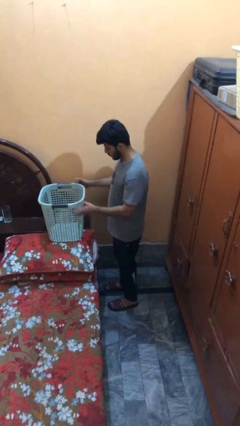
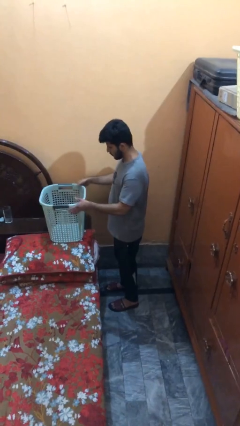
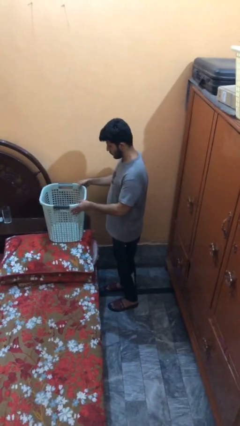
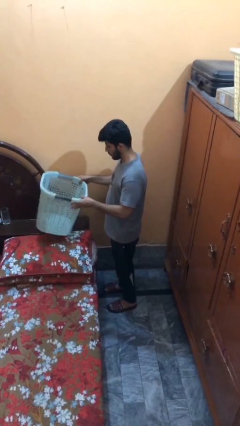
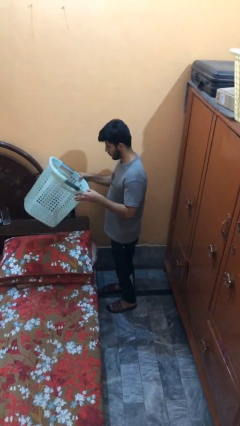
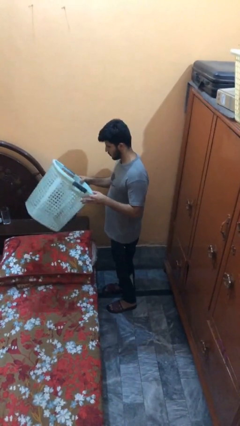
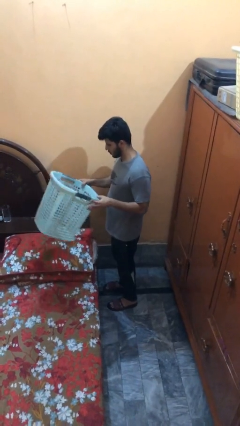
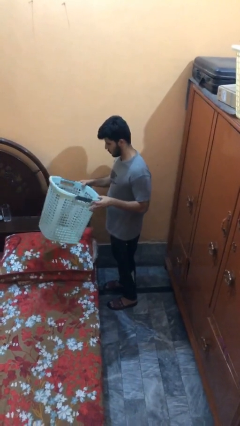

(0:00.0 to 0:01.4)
person picks up object from bed

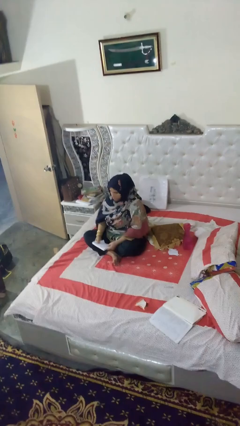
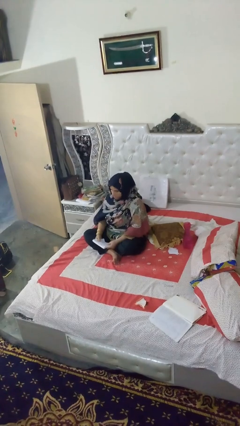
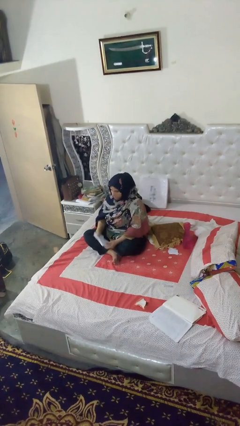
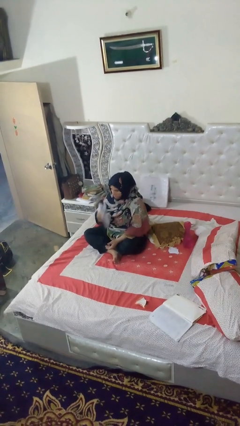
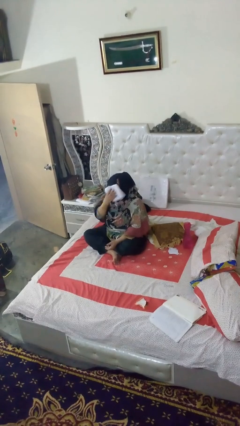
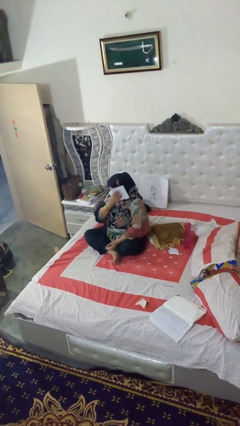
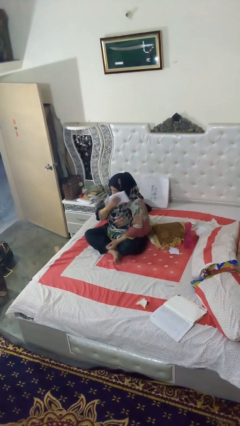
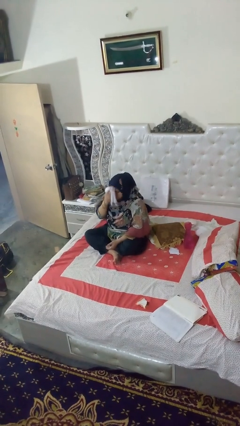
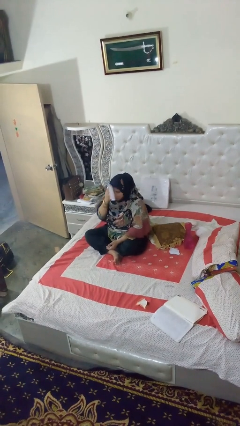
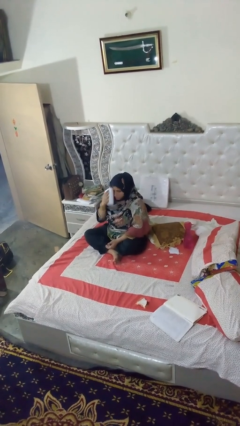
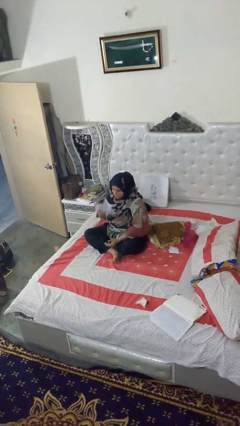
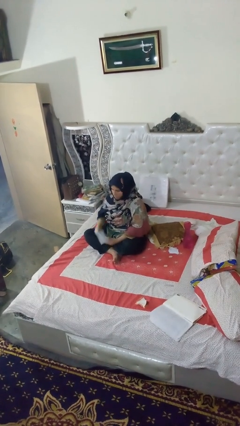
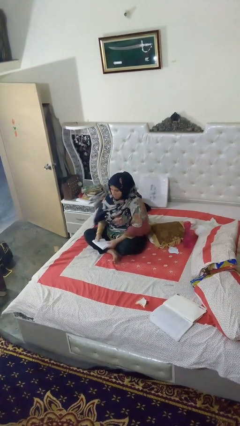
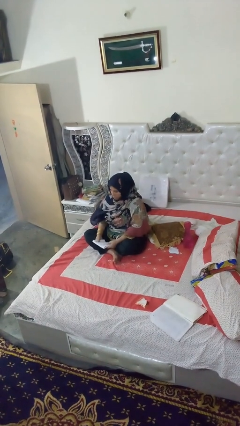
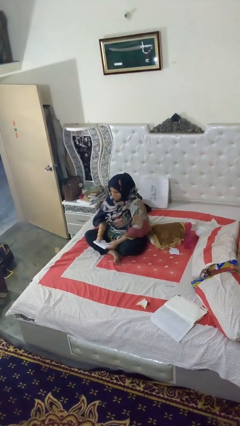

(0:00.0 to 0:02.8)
person wipes mouth with napkin

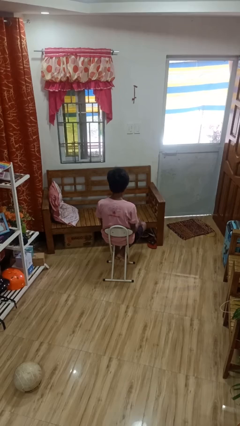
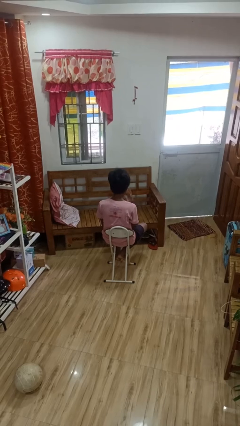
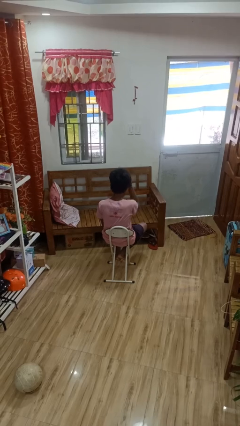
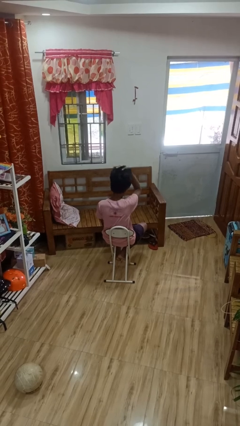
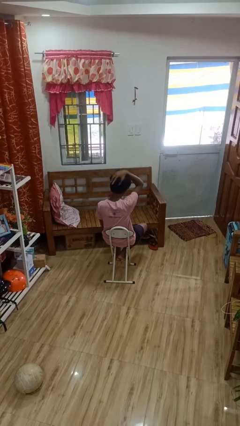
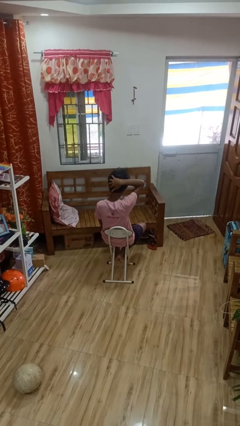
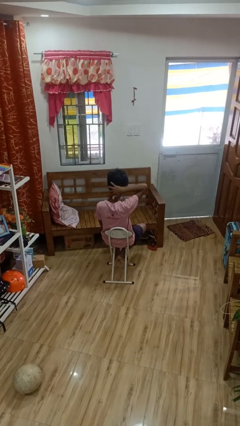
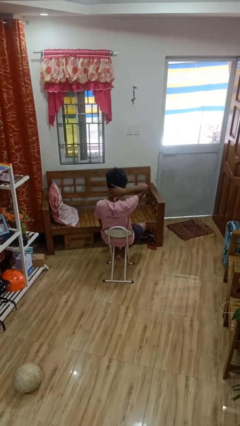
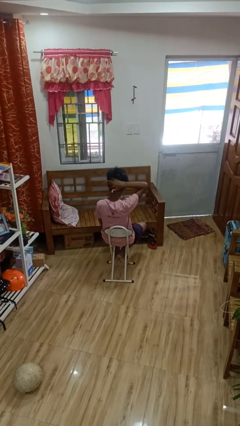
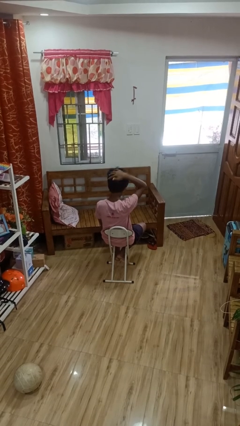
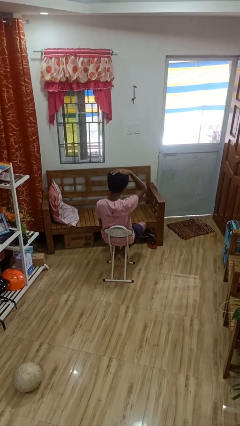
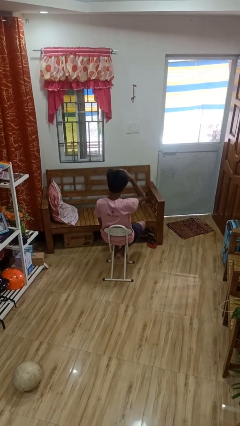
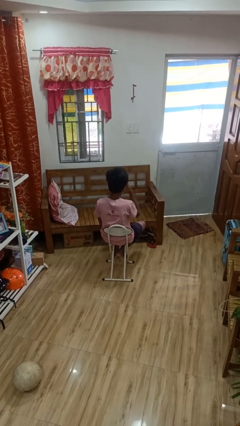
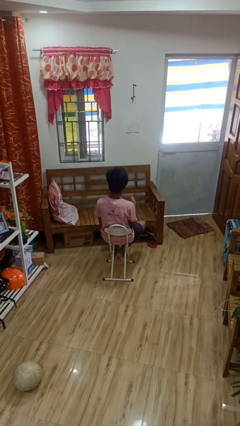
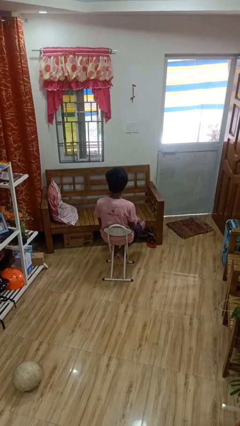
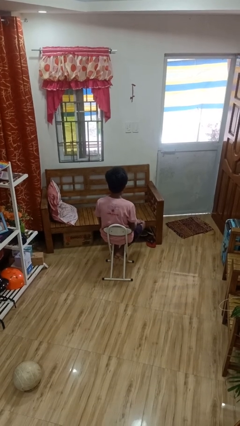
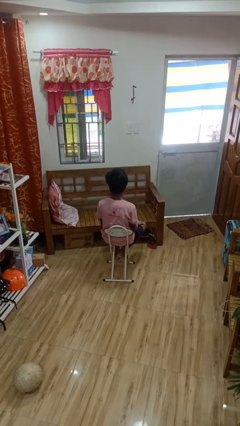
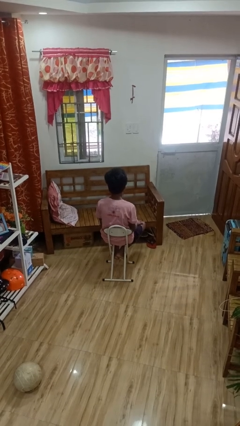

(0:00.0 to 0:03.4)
person strokes hair

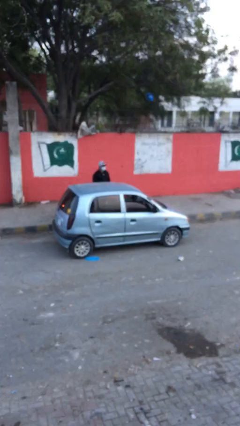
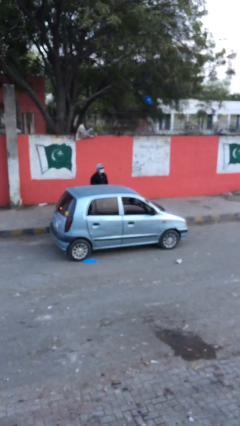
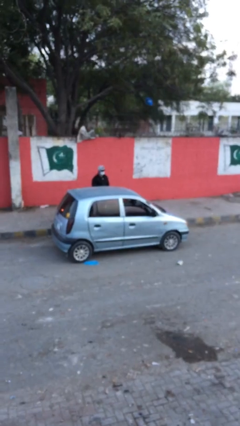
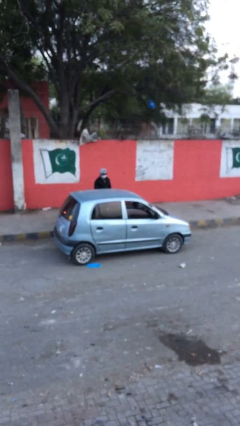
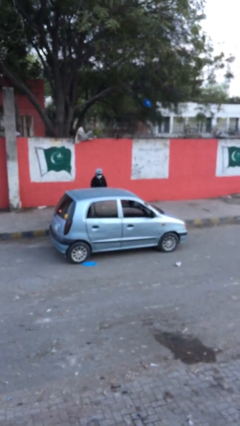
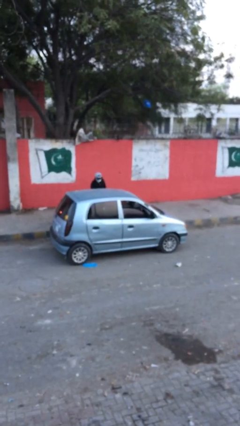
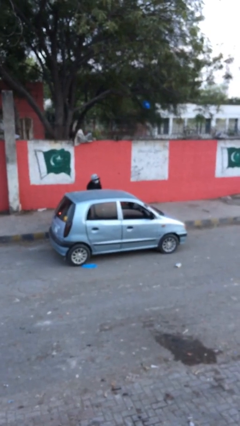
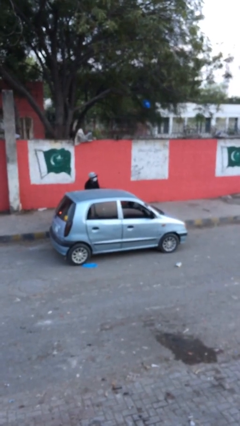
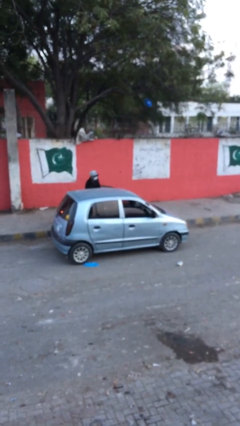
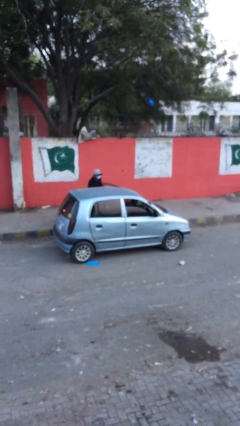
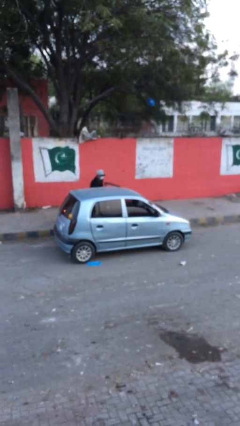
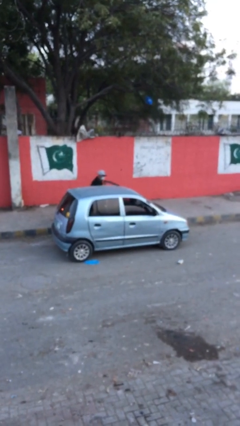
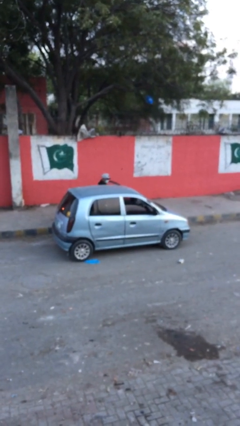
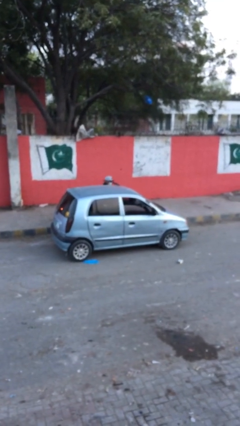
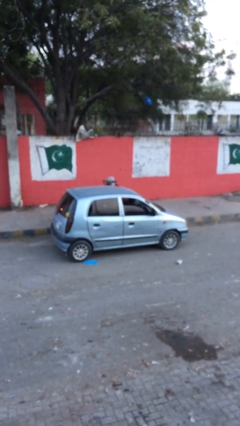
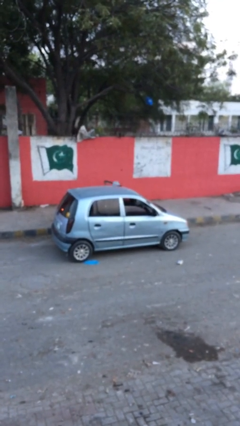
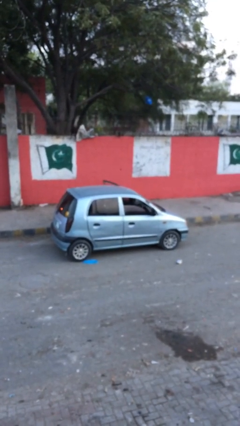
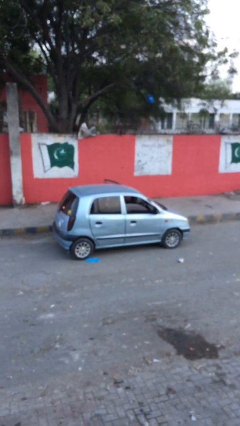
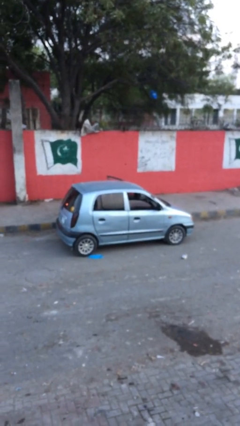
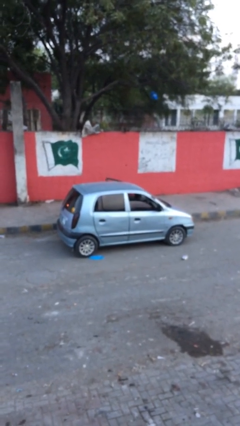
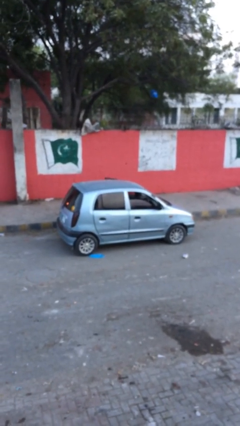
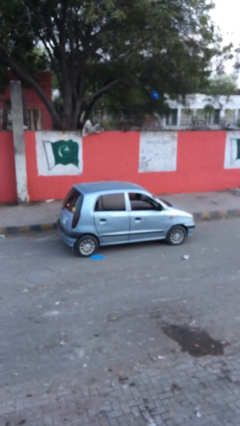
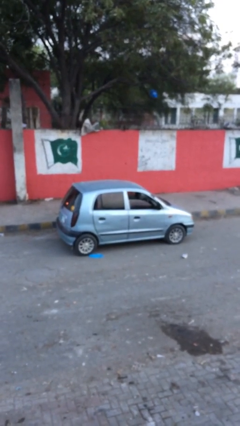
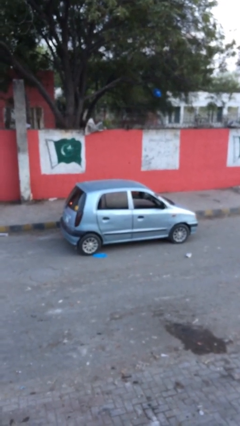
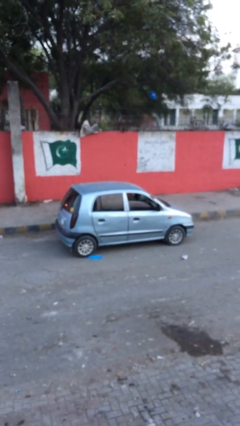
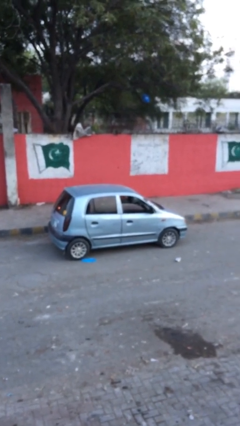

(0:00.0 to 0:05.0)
car picks up person

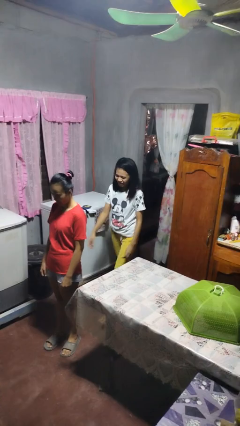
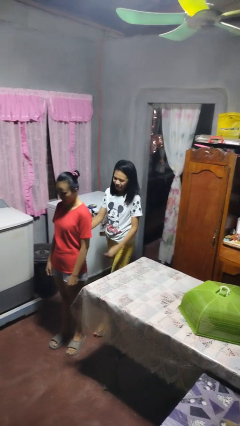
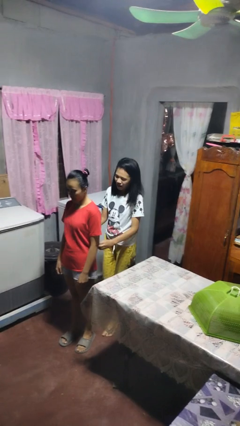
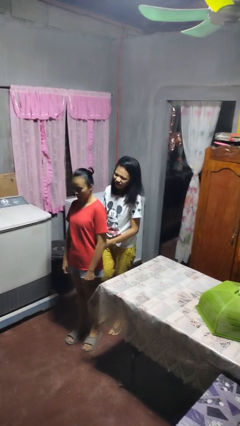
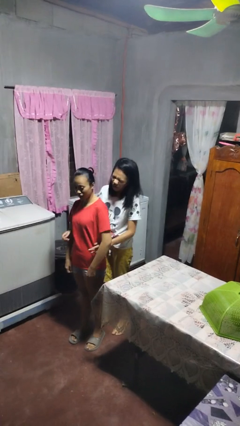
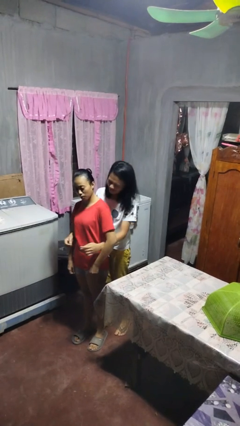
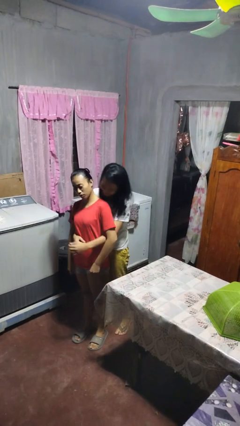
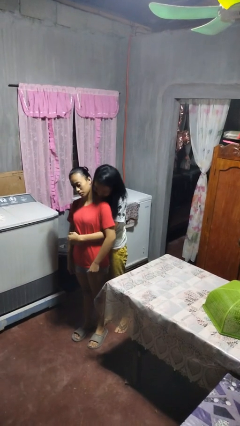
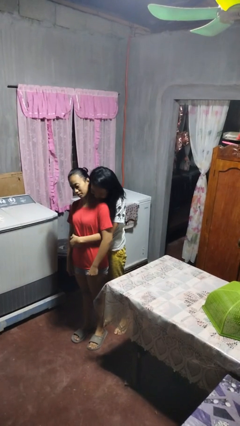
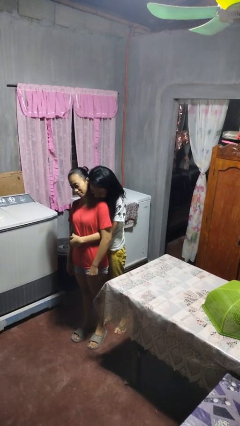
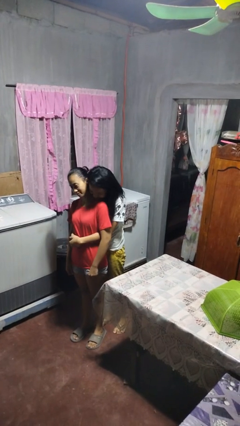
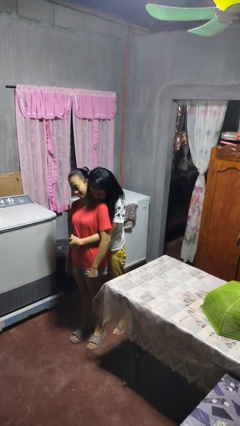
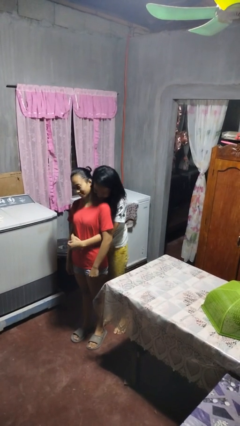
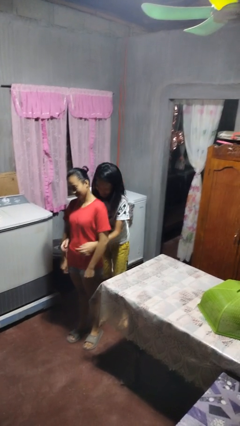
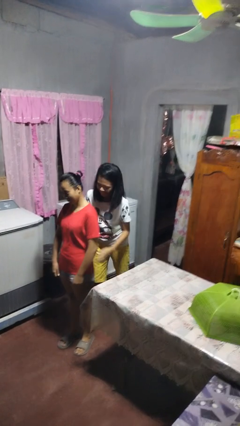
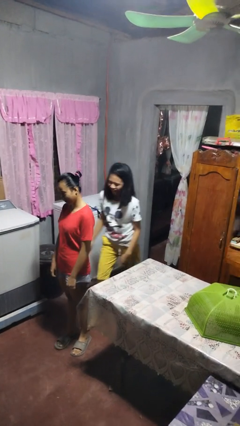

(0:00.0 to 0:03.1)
person hugs person from behind

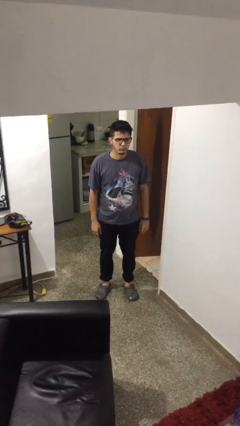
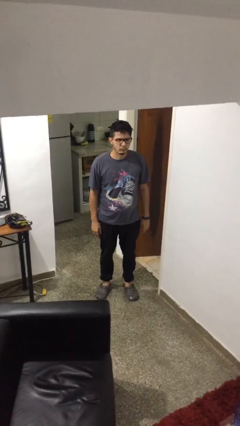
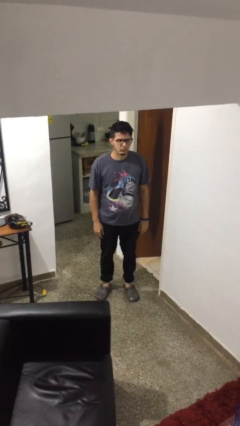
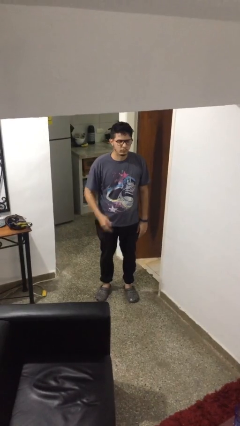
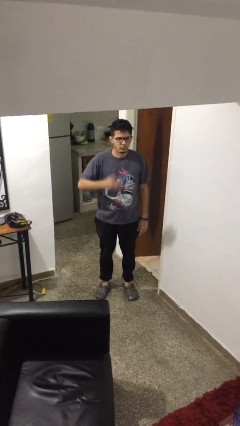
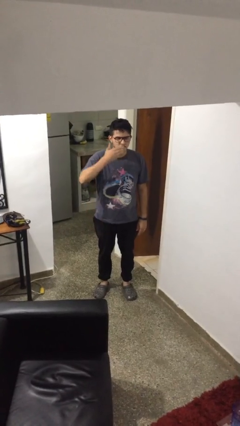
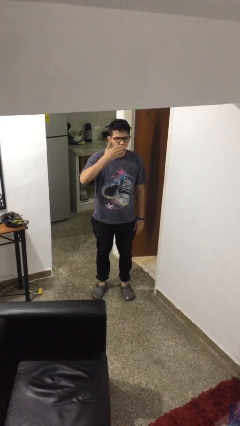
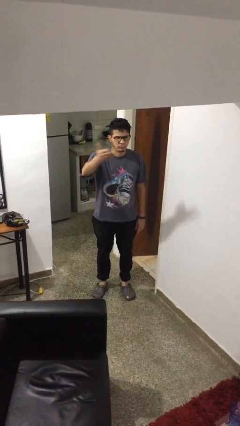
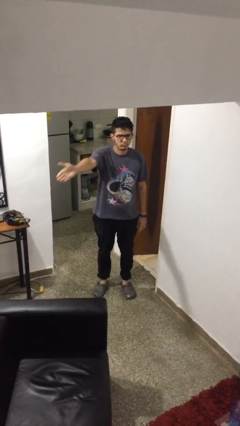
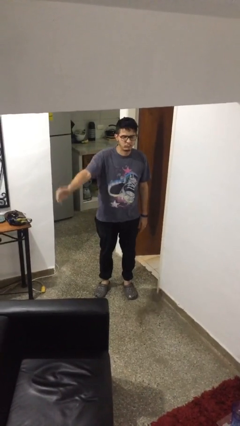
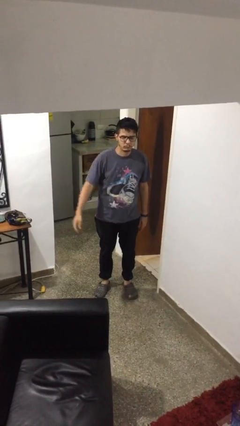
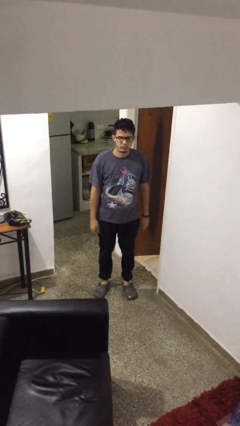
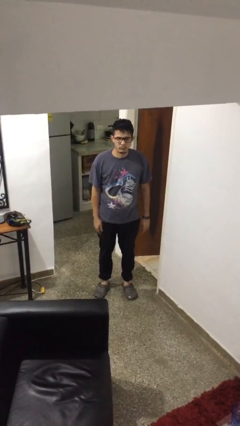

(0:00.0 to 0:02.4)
person gestures blow kiss
